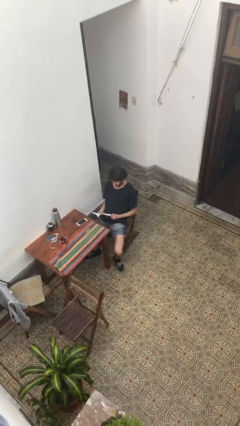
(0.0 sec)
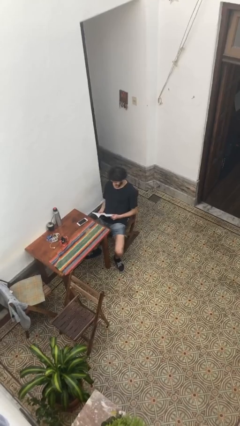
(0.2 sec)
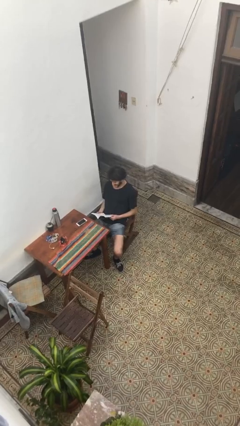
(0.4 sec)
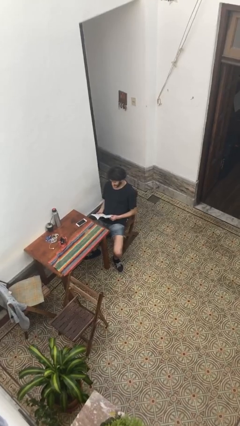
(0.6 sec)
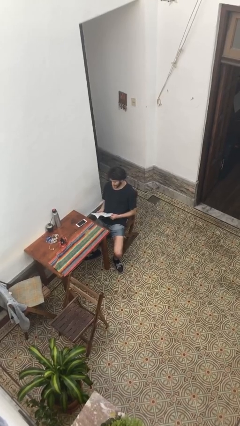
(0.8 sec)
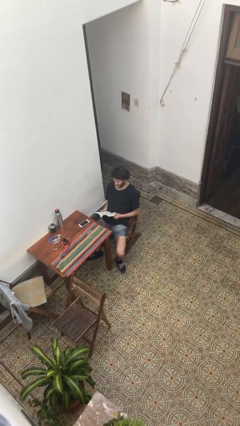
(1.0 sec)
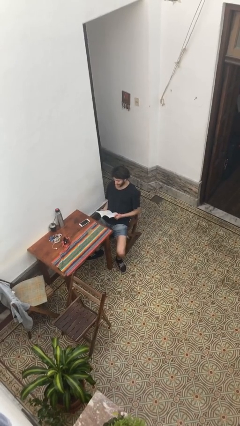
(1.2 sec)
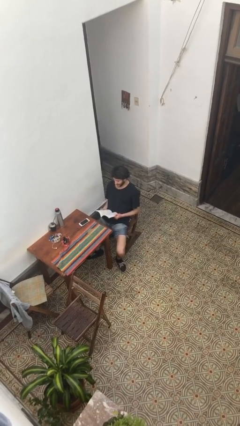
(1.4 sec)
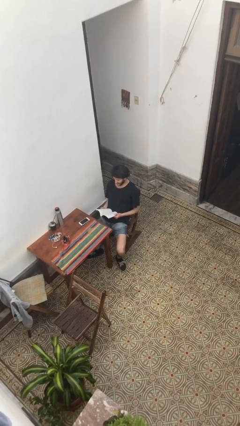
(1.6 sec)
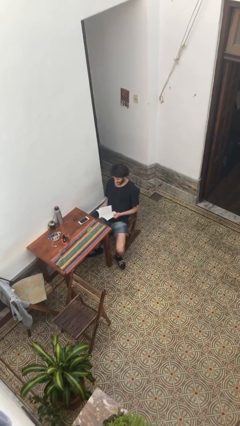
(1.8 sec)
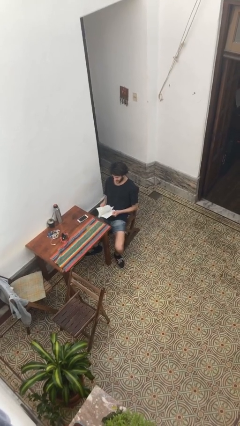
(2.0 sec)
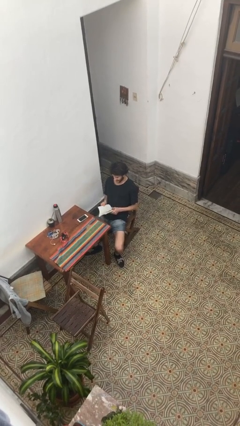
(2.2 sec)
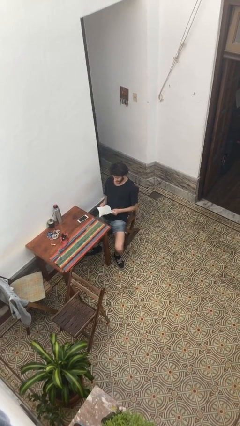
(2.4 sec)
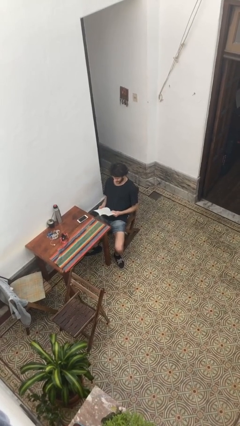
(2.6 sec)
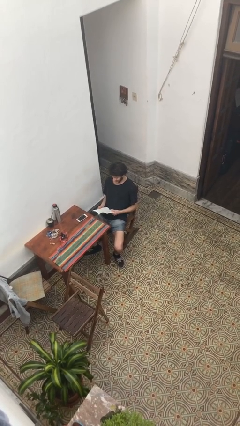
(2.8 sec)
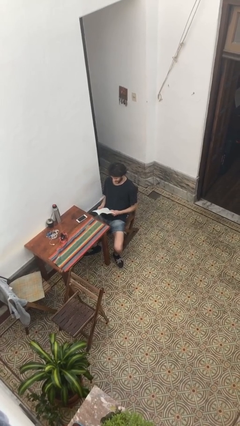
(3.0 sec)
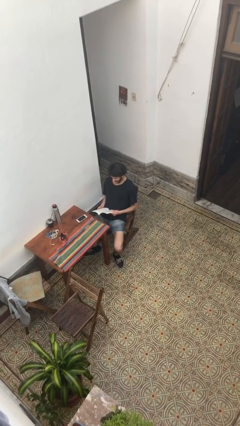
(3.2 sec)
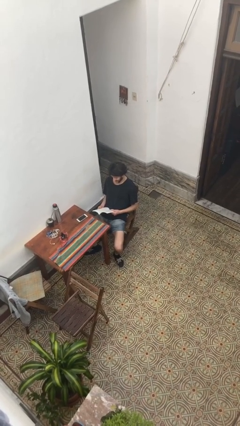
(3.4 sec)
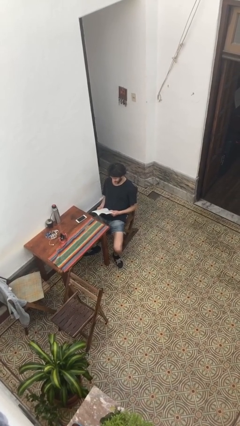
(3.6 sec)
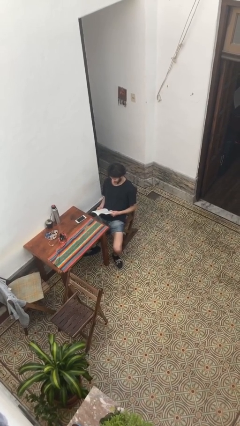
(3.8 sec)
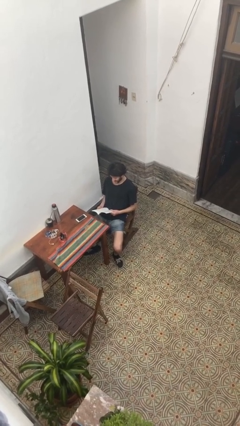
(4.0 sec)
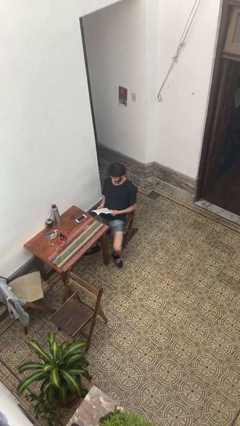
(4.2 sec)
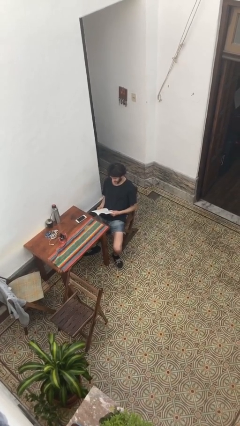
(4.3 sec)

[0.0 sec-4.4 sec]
person reads document

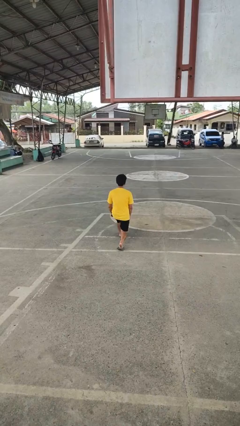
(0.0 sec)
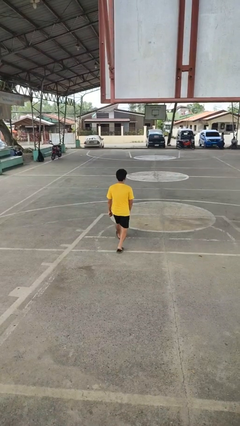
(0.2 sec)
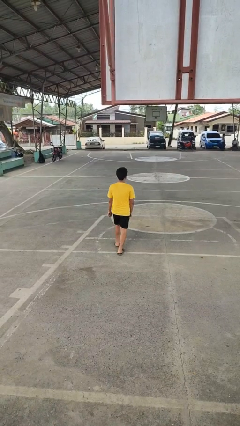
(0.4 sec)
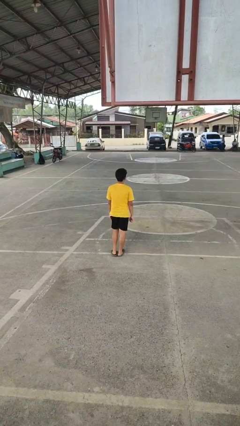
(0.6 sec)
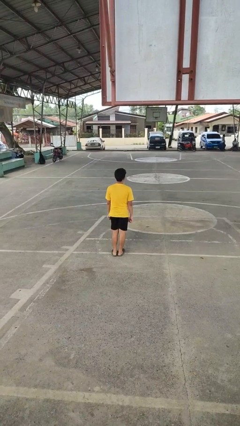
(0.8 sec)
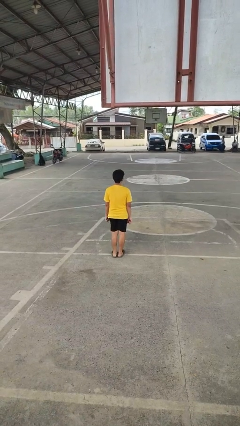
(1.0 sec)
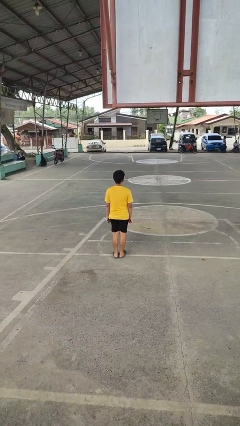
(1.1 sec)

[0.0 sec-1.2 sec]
person stands up from floor

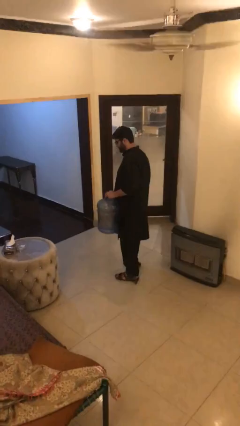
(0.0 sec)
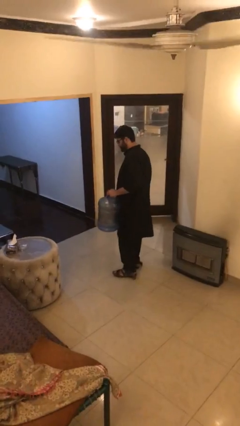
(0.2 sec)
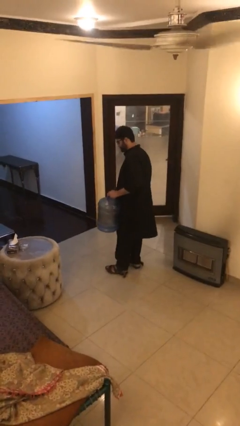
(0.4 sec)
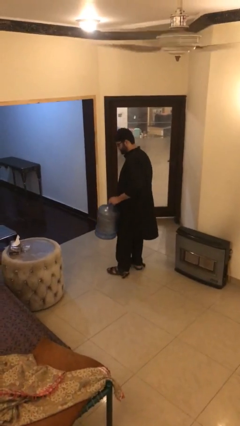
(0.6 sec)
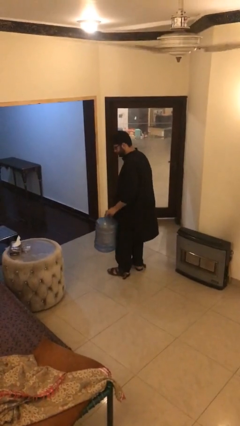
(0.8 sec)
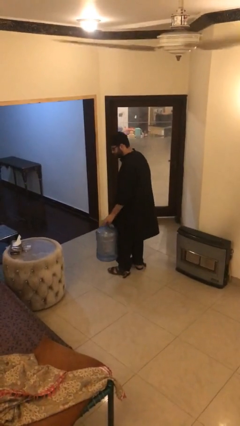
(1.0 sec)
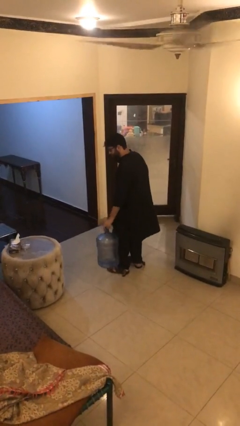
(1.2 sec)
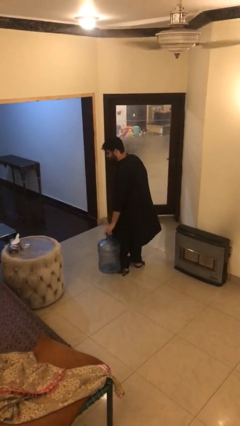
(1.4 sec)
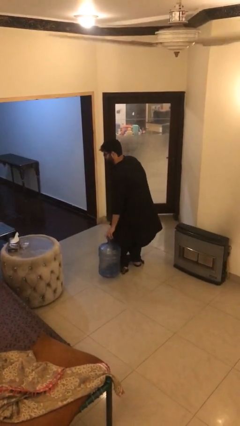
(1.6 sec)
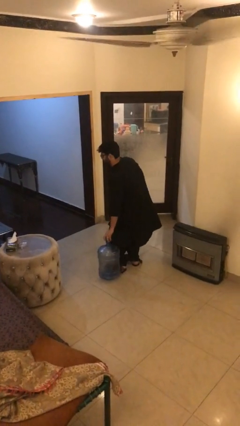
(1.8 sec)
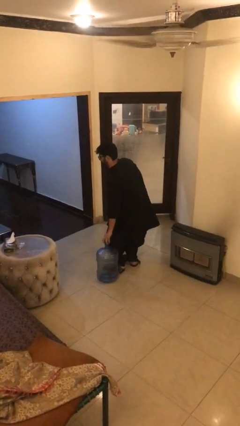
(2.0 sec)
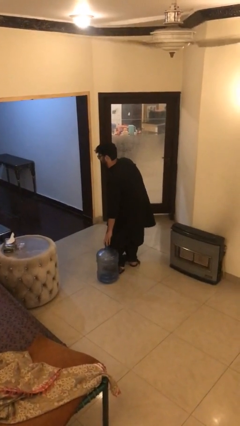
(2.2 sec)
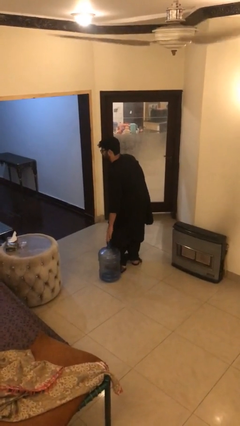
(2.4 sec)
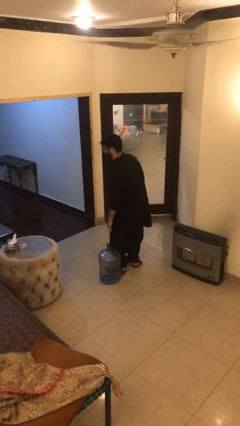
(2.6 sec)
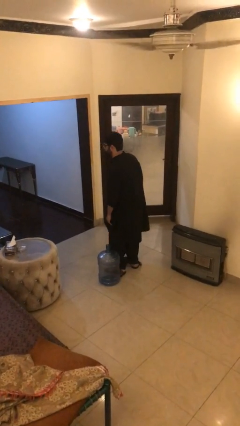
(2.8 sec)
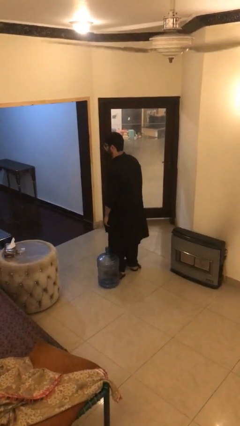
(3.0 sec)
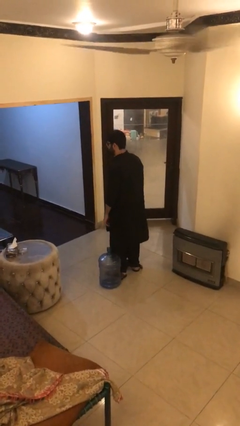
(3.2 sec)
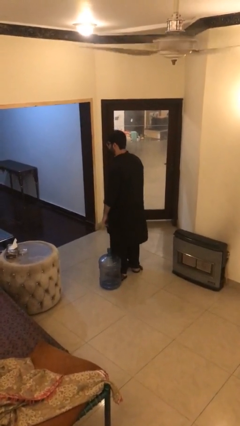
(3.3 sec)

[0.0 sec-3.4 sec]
person puts down object on floor

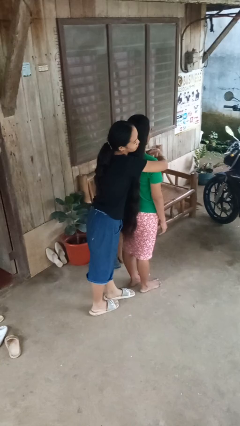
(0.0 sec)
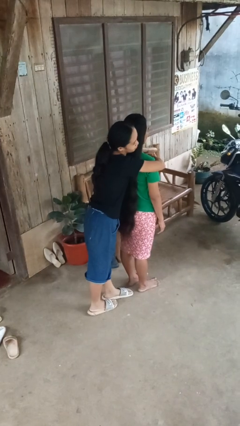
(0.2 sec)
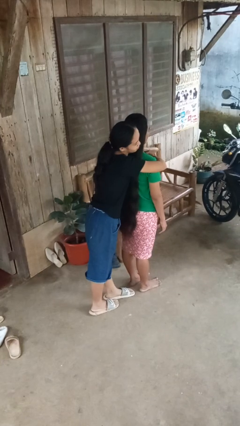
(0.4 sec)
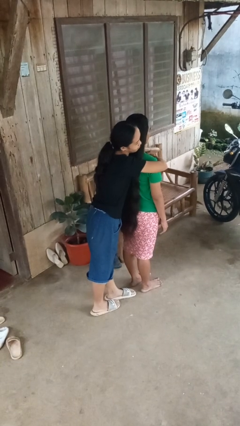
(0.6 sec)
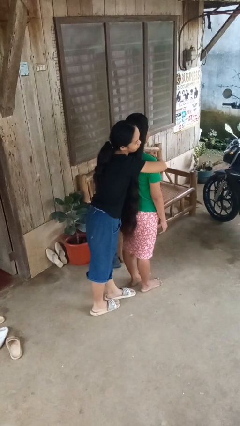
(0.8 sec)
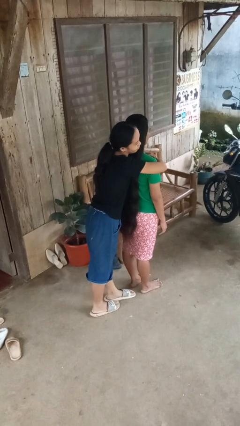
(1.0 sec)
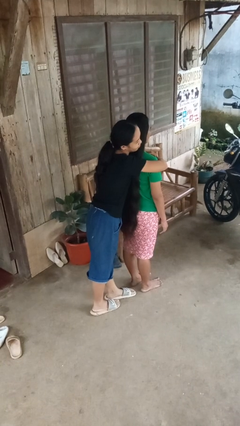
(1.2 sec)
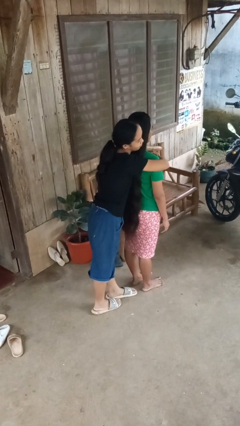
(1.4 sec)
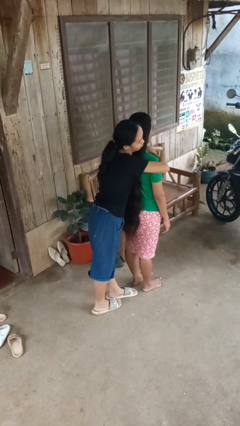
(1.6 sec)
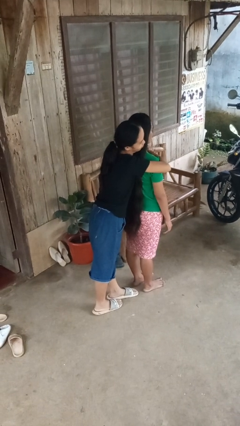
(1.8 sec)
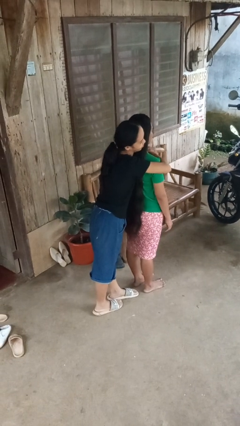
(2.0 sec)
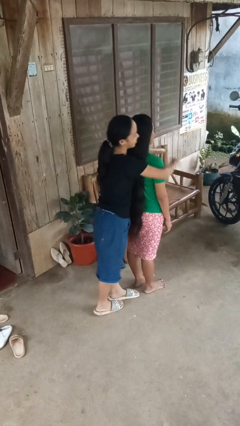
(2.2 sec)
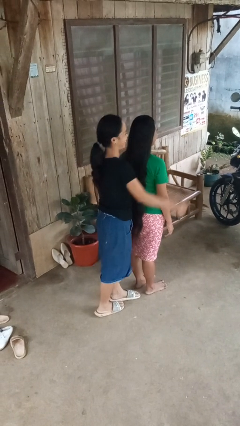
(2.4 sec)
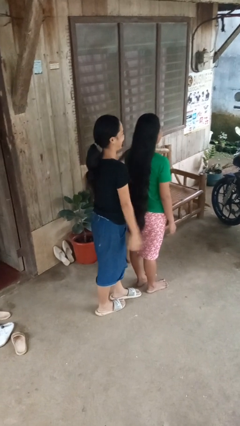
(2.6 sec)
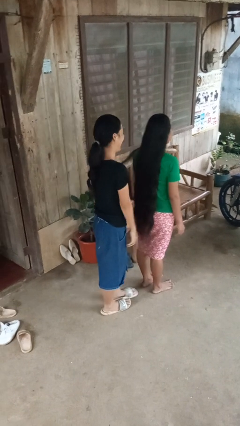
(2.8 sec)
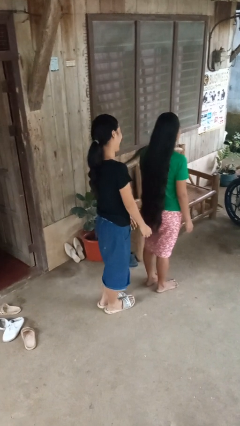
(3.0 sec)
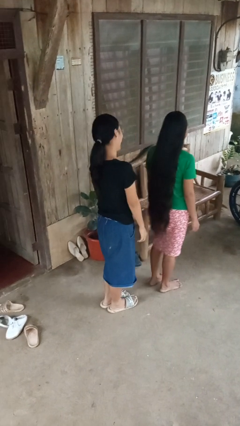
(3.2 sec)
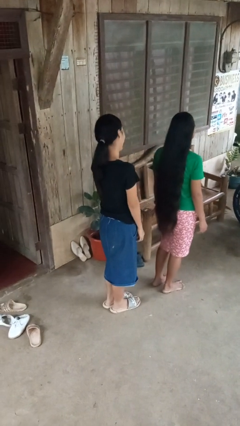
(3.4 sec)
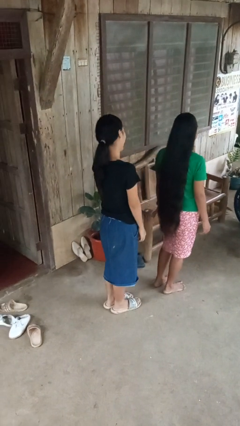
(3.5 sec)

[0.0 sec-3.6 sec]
person hugs person from behind

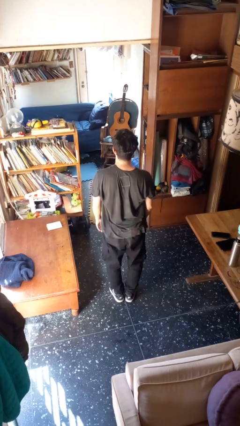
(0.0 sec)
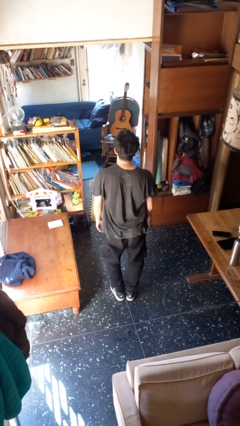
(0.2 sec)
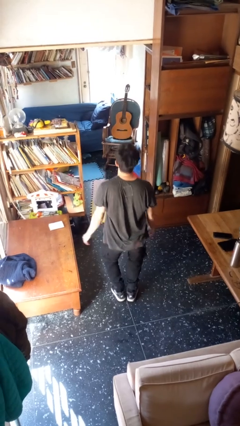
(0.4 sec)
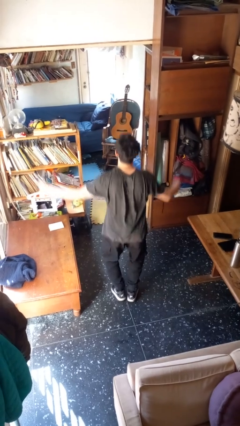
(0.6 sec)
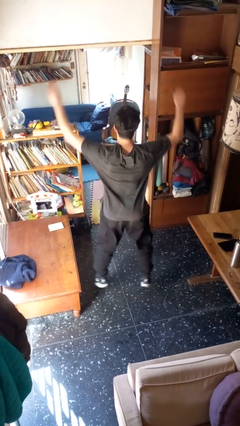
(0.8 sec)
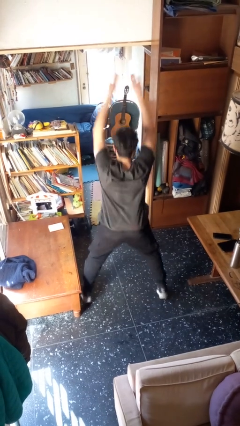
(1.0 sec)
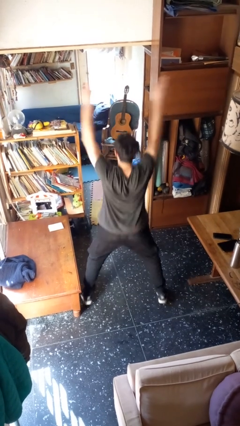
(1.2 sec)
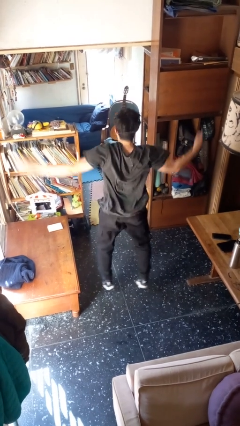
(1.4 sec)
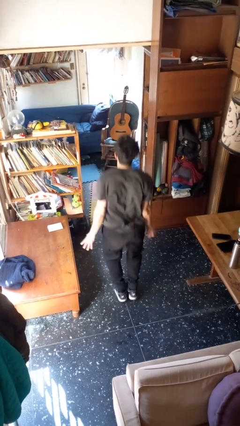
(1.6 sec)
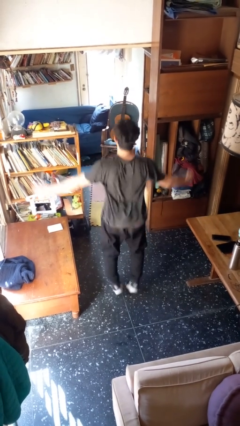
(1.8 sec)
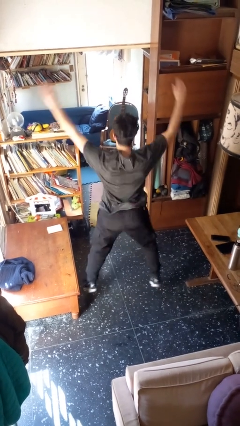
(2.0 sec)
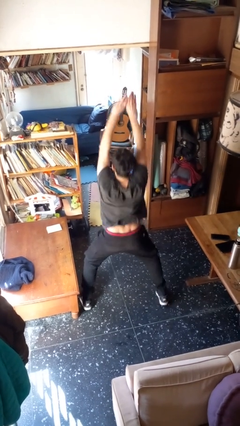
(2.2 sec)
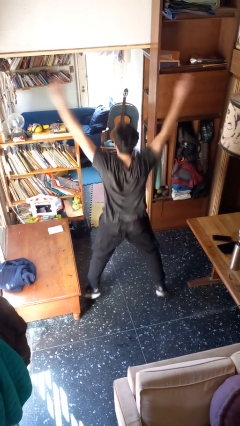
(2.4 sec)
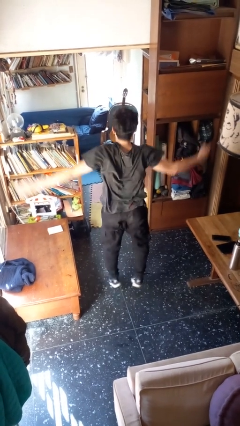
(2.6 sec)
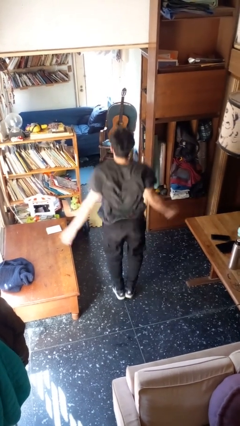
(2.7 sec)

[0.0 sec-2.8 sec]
person exercises with jumping jacks

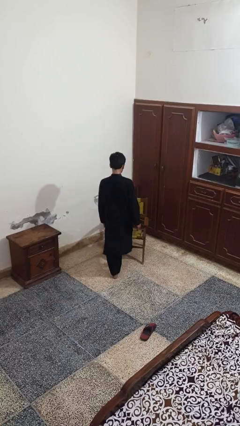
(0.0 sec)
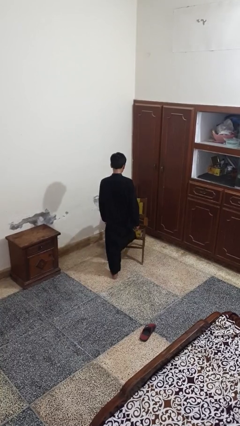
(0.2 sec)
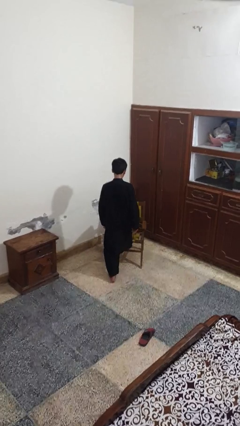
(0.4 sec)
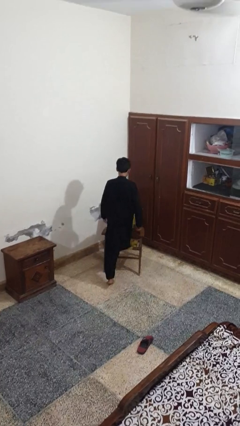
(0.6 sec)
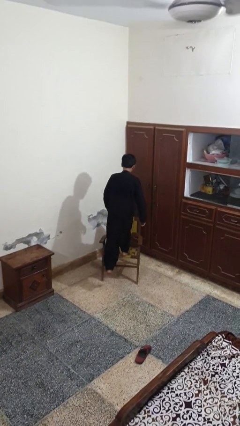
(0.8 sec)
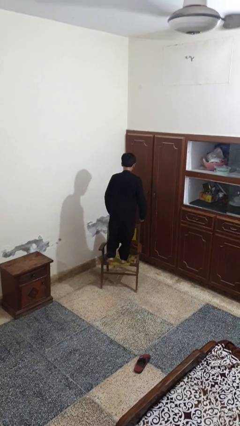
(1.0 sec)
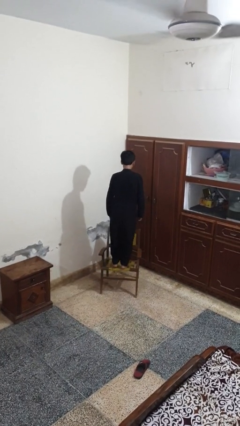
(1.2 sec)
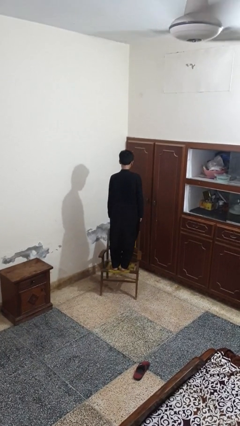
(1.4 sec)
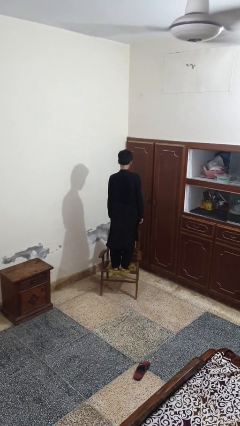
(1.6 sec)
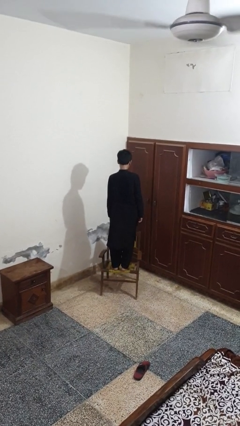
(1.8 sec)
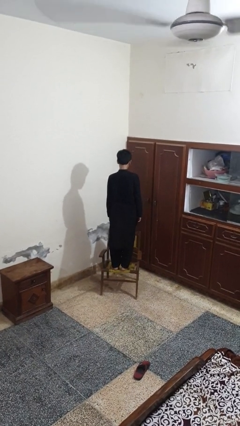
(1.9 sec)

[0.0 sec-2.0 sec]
person climbs on chair
